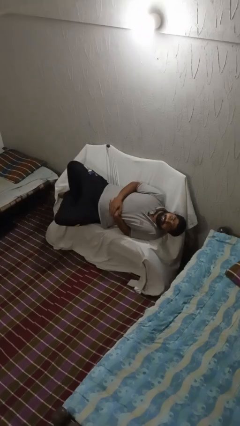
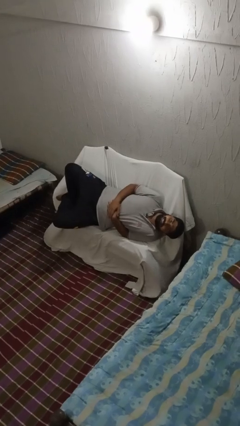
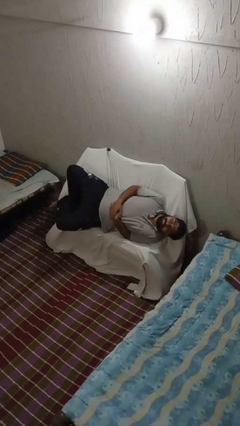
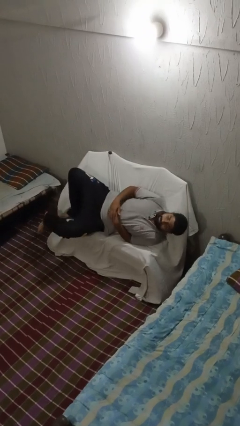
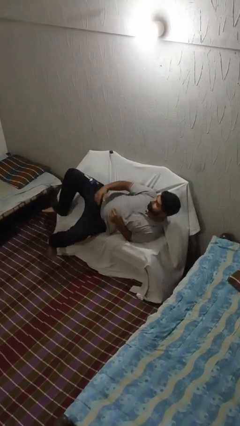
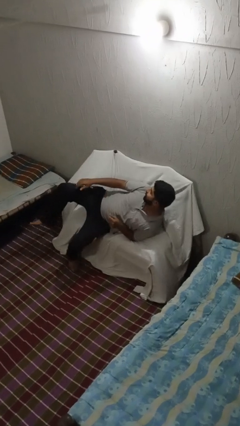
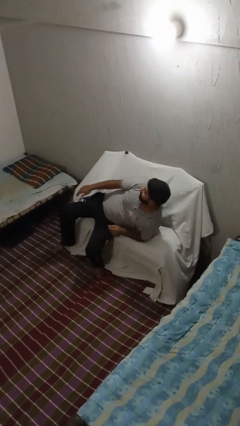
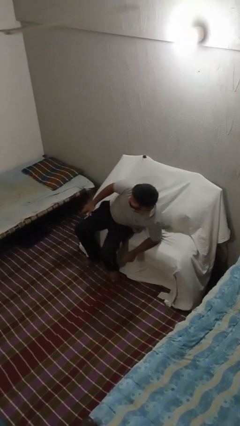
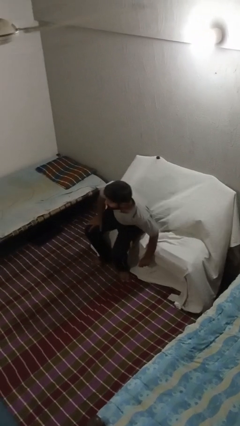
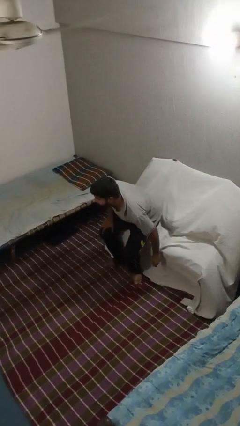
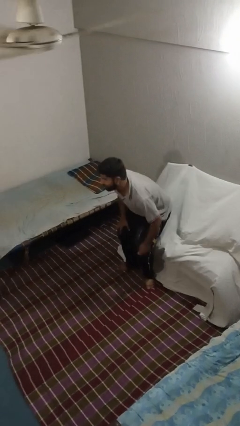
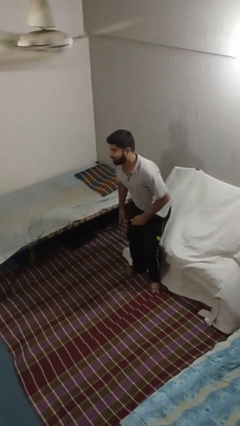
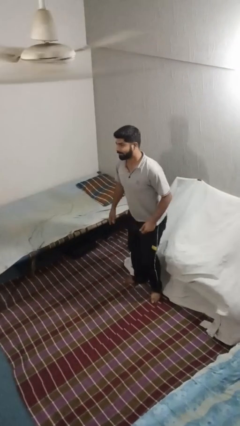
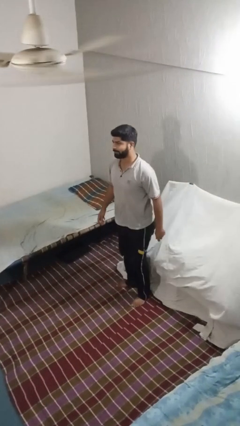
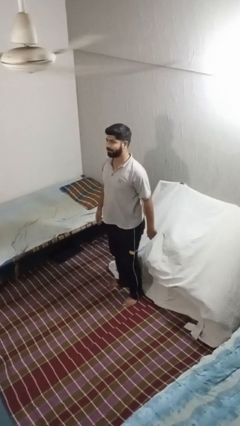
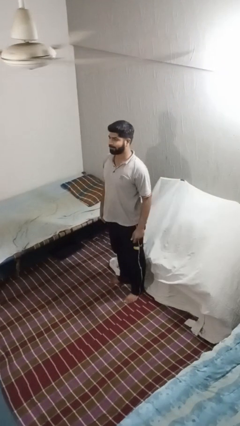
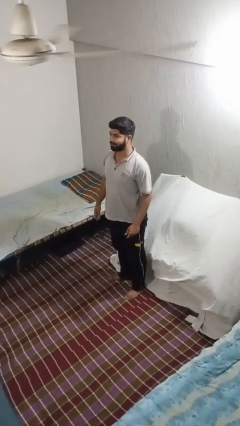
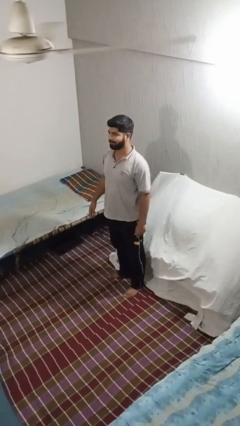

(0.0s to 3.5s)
person stands up

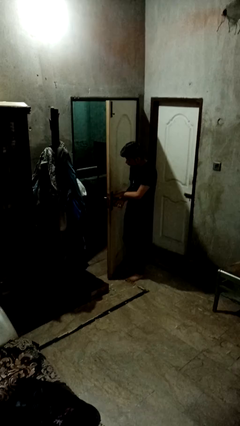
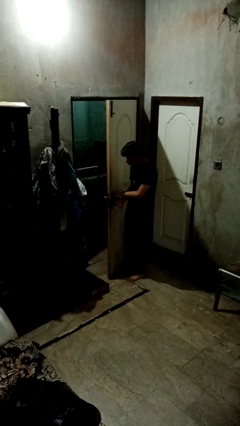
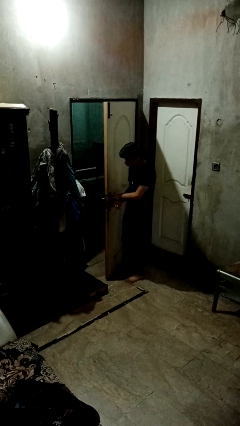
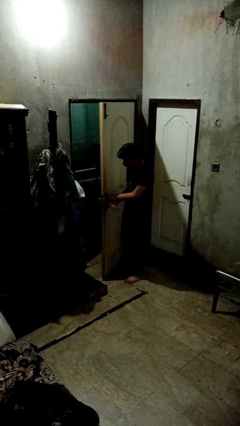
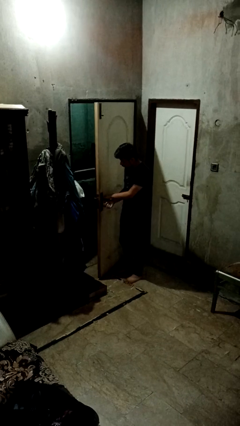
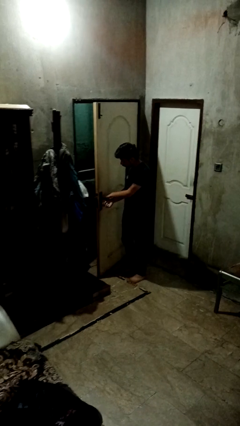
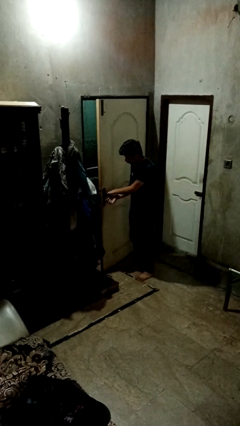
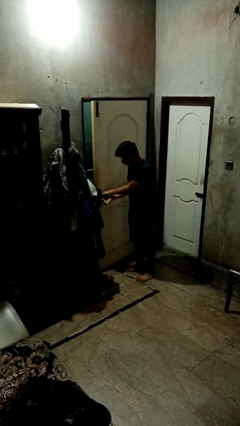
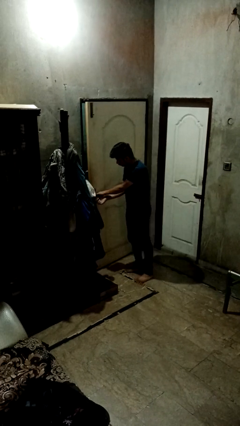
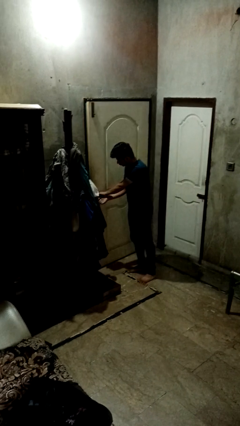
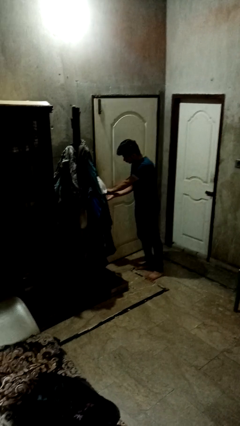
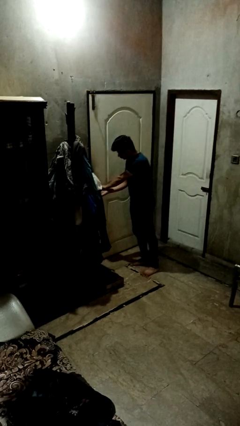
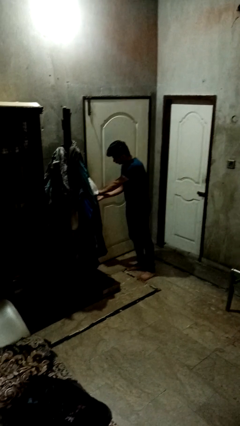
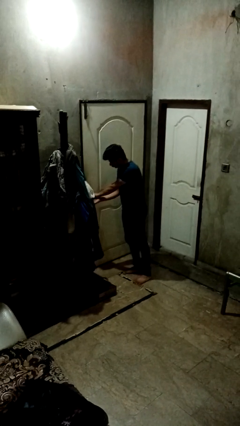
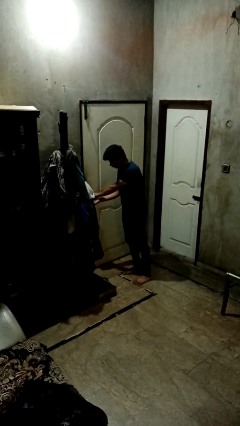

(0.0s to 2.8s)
person closes facility door

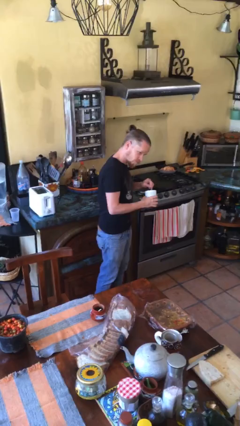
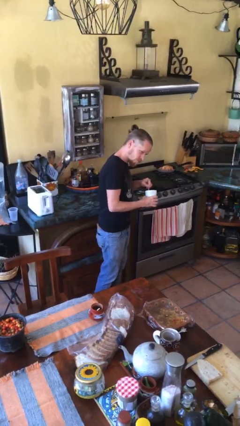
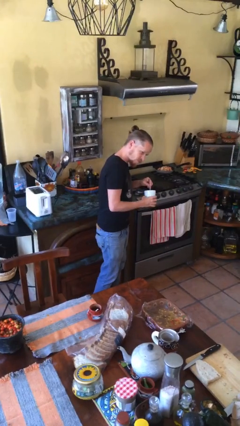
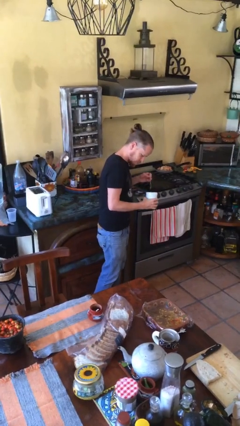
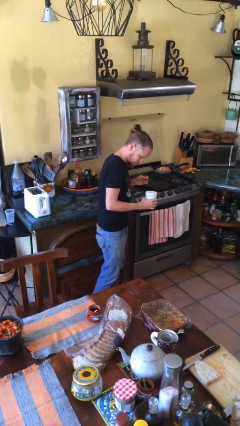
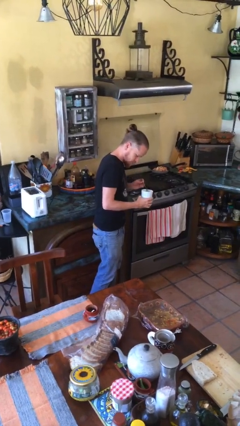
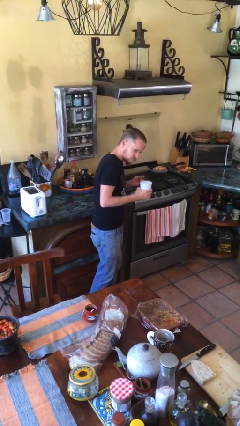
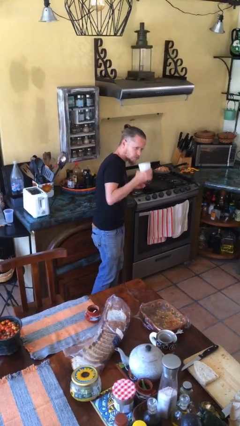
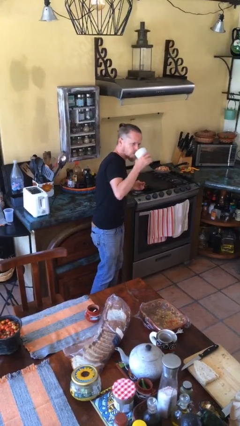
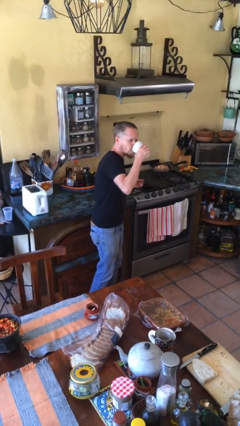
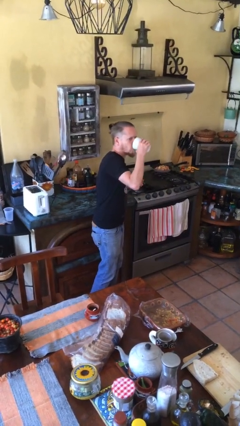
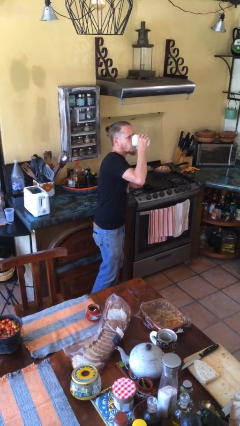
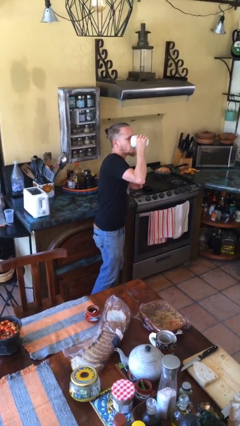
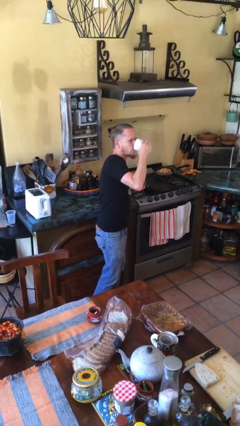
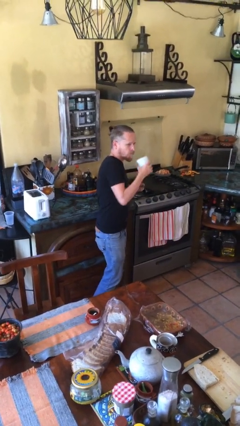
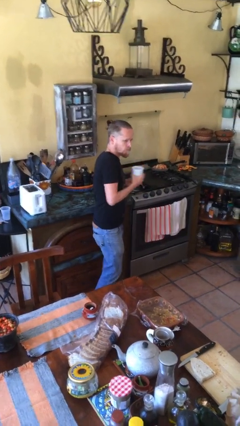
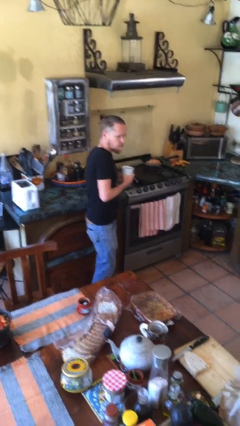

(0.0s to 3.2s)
person drinks from mug

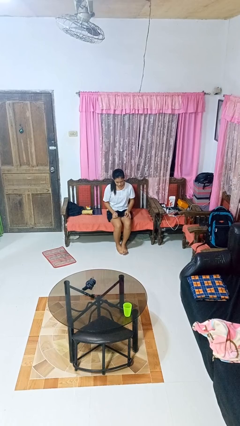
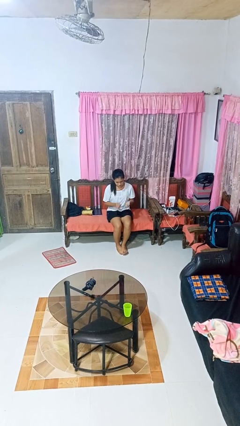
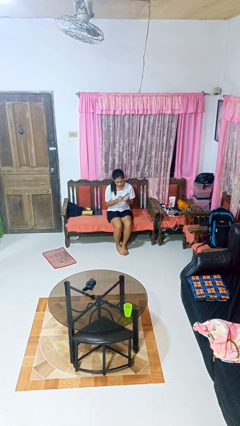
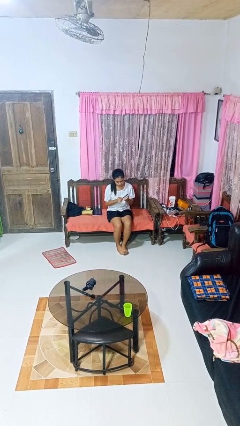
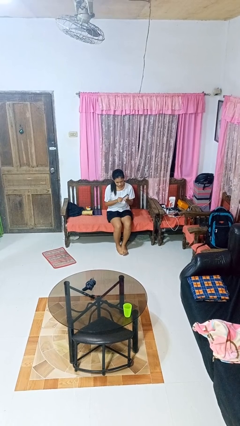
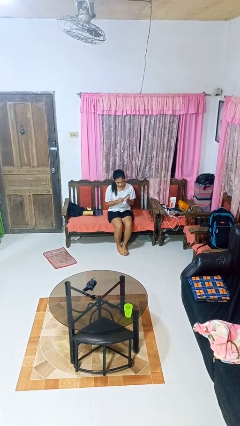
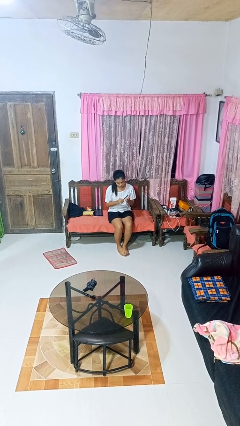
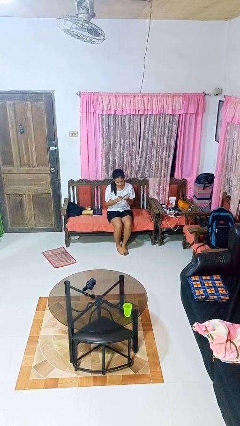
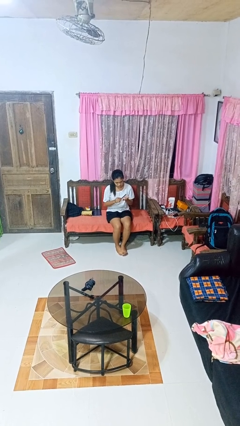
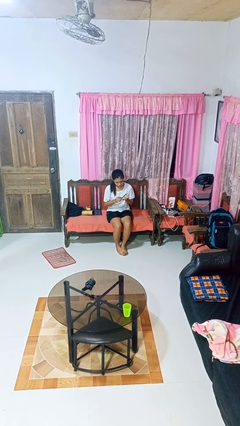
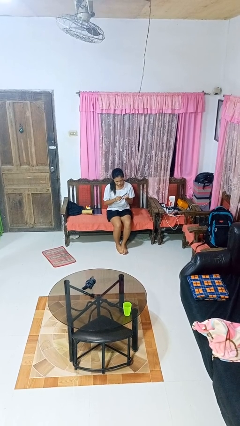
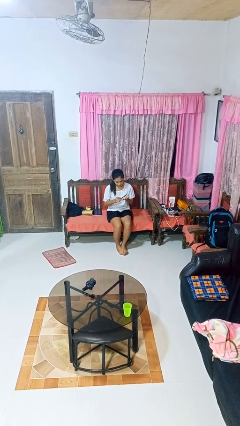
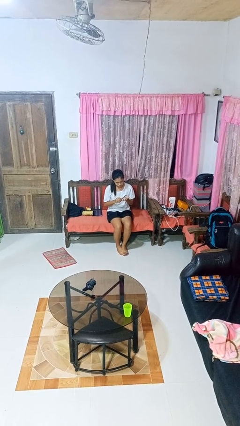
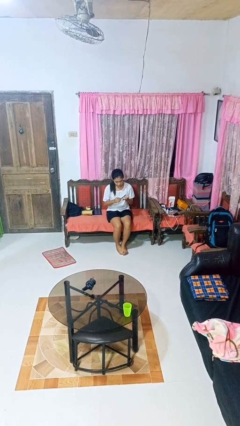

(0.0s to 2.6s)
person files fingernails

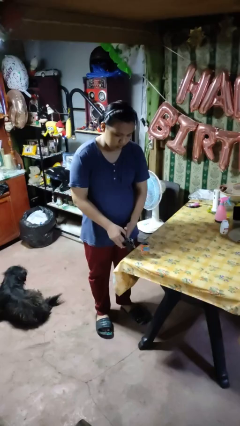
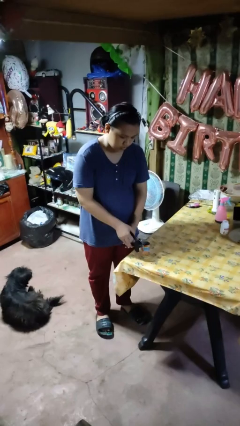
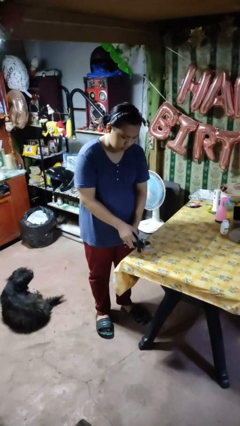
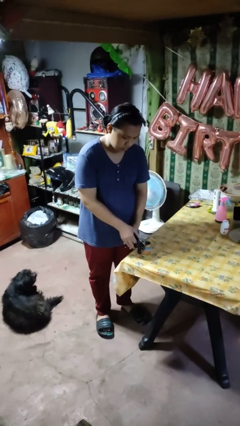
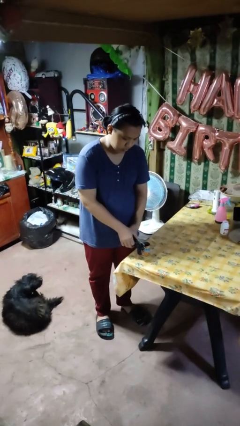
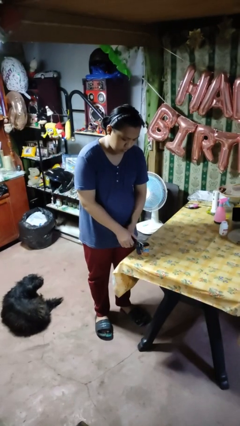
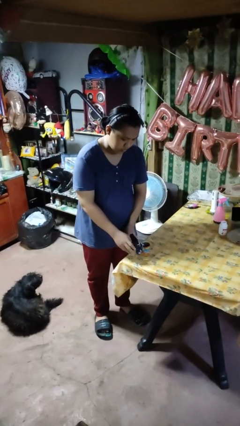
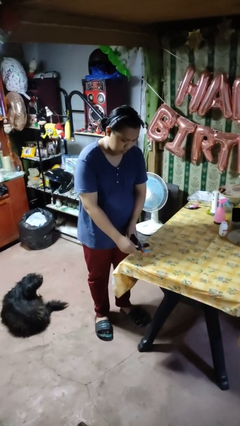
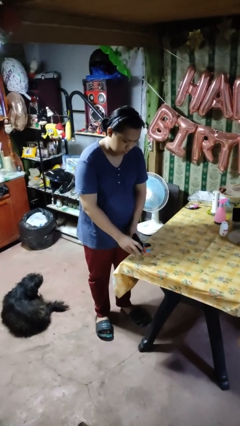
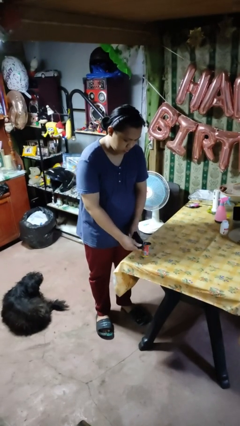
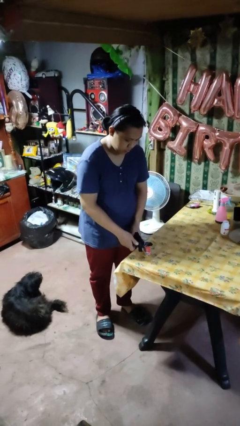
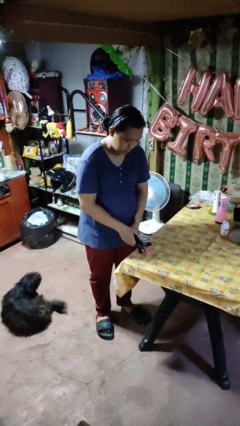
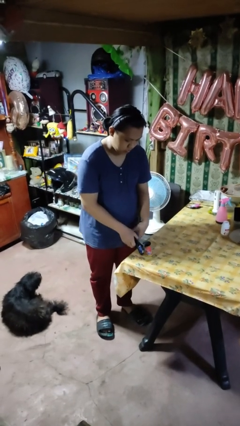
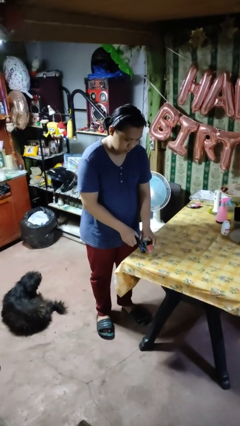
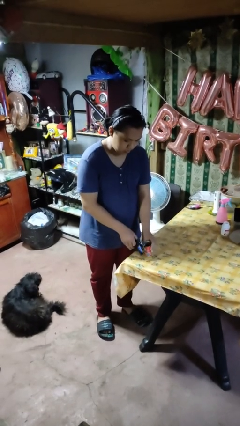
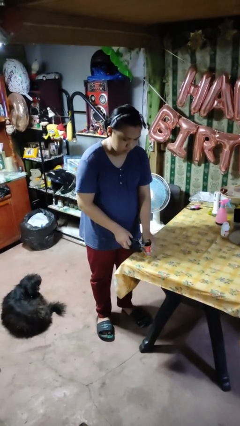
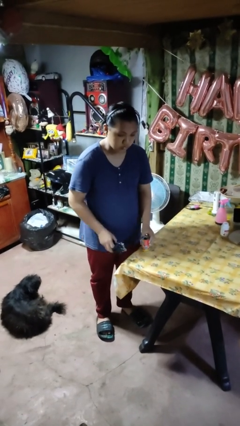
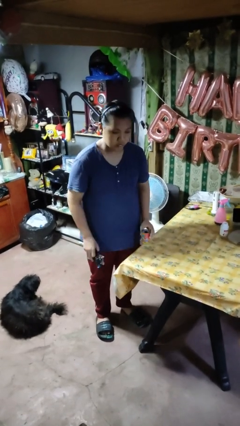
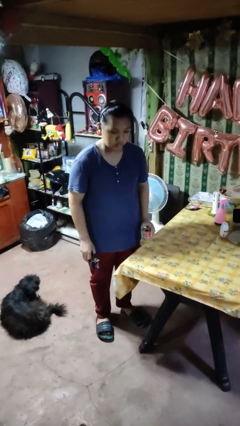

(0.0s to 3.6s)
person opens can with can opener

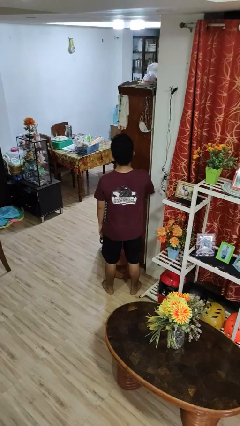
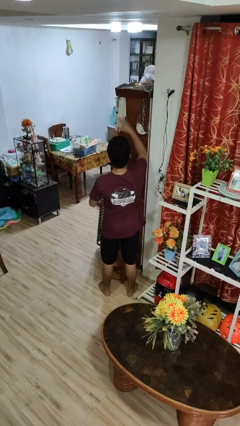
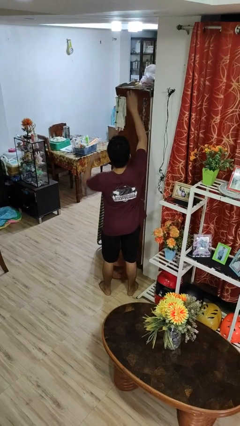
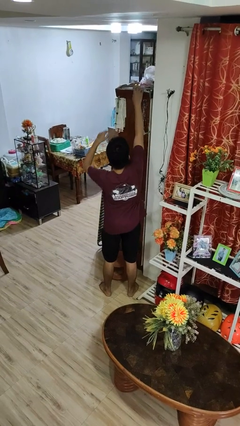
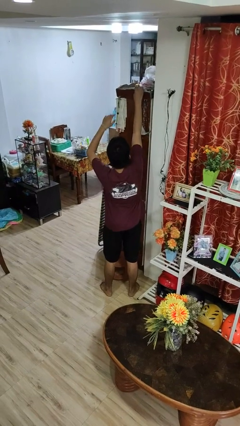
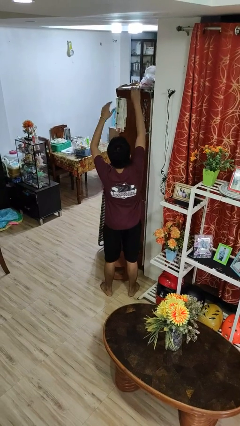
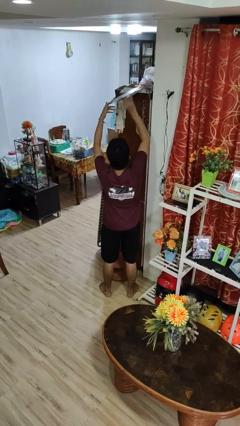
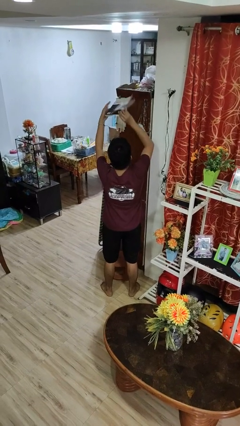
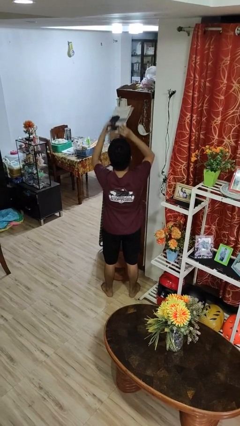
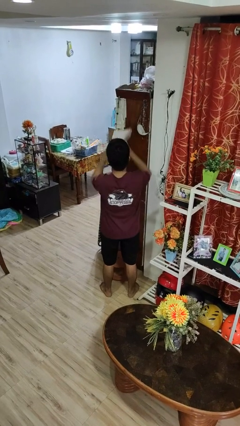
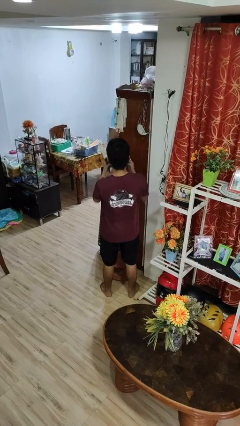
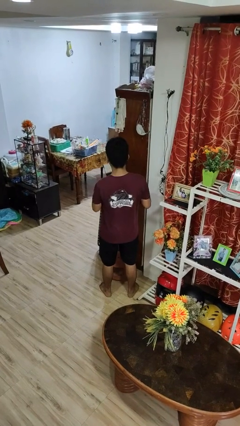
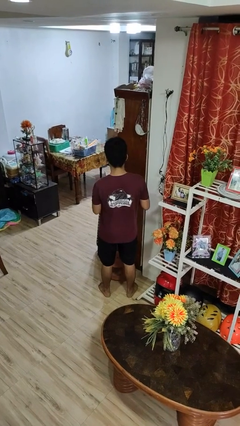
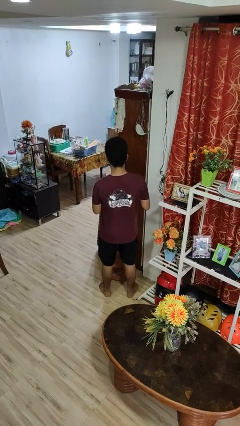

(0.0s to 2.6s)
person picks up object from shelf
